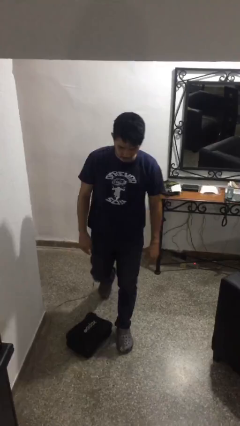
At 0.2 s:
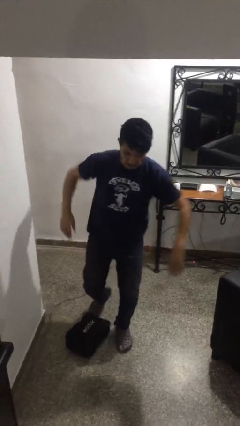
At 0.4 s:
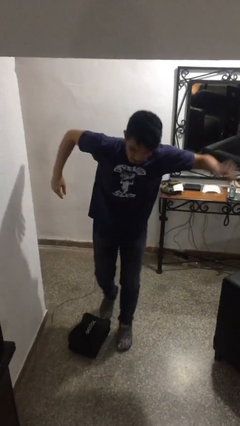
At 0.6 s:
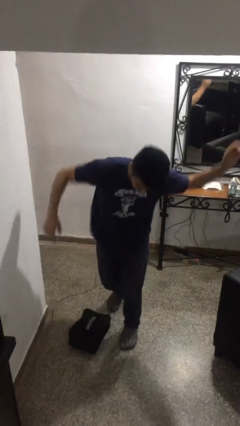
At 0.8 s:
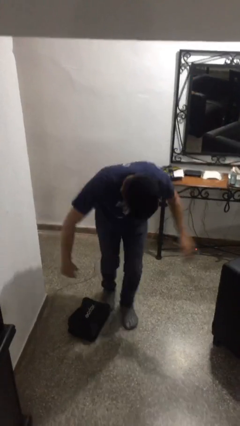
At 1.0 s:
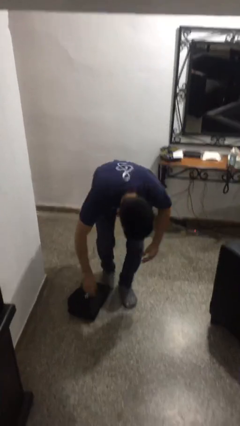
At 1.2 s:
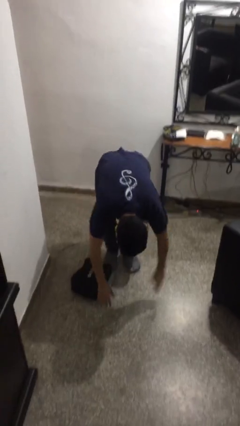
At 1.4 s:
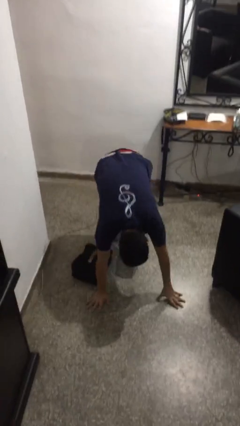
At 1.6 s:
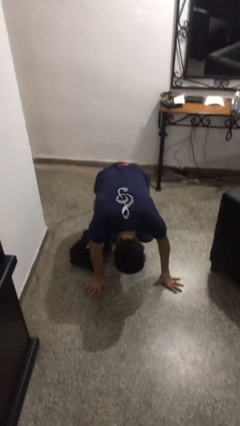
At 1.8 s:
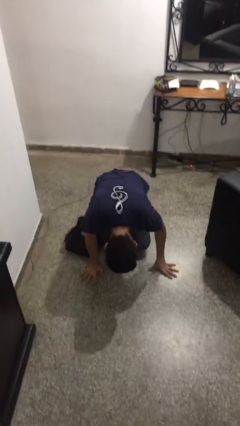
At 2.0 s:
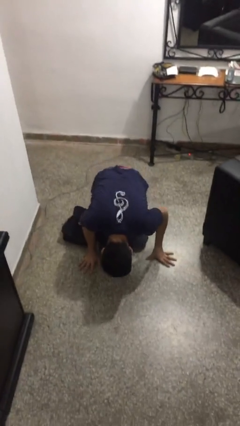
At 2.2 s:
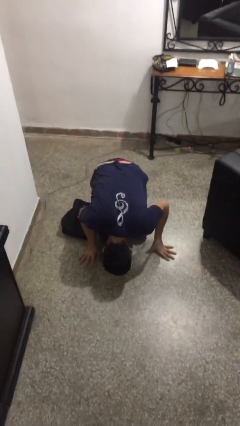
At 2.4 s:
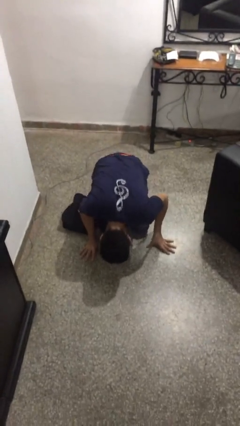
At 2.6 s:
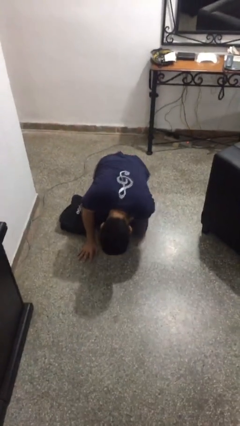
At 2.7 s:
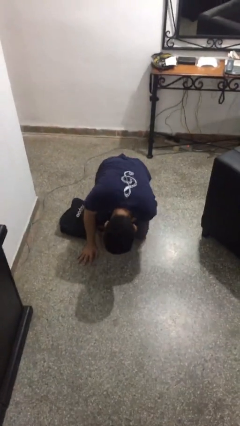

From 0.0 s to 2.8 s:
person trips on object on floor

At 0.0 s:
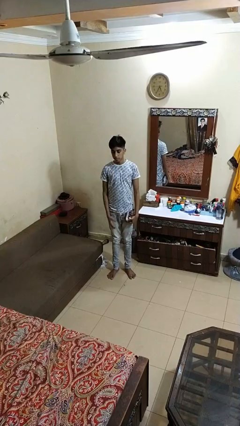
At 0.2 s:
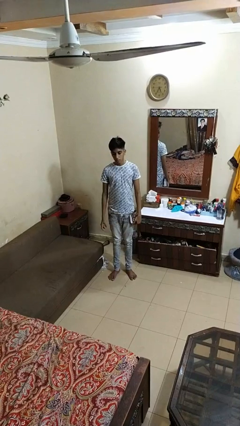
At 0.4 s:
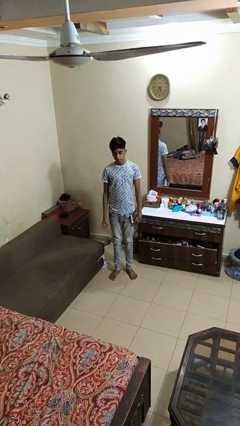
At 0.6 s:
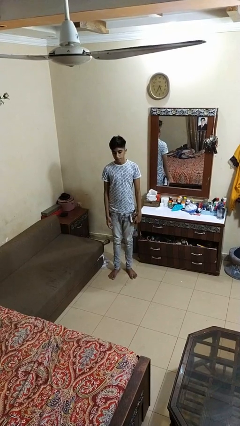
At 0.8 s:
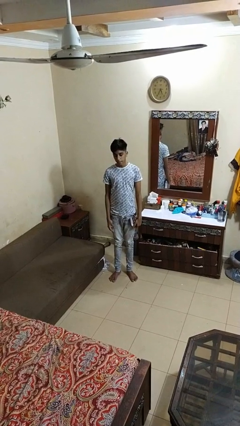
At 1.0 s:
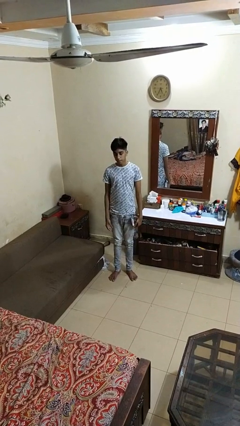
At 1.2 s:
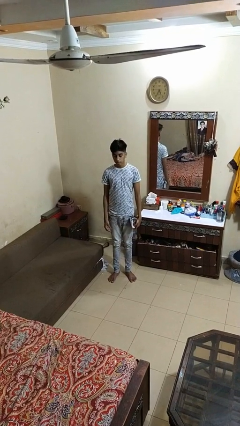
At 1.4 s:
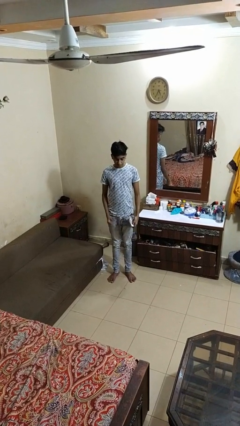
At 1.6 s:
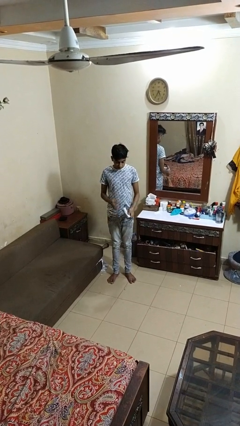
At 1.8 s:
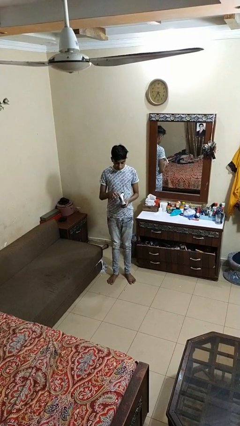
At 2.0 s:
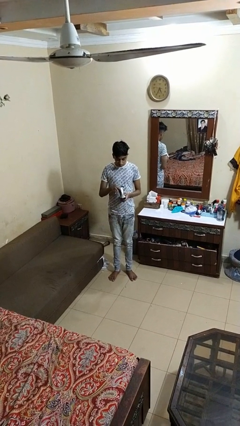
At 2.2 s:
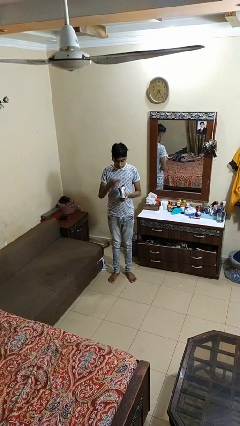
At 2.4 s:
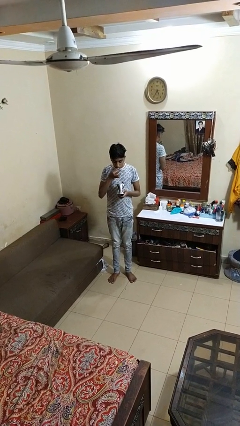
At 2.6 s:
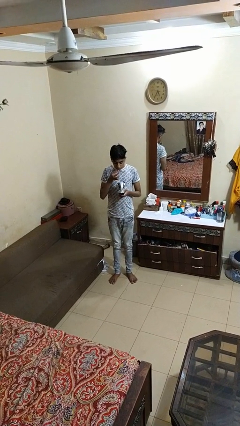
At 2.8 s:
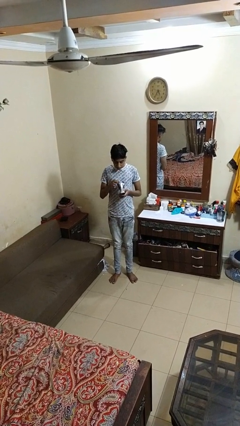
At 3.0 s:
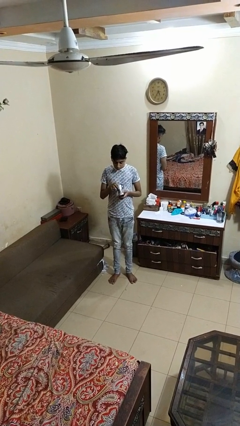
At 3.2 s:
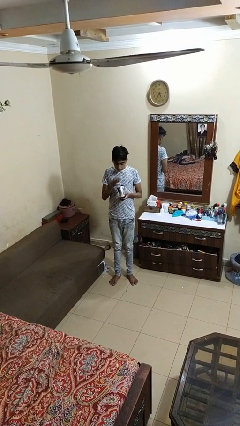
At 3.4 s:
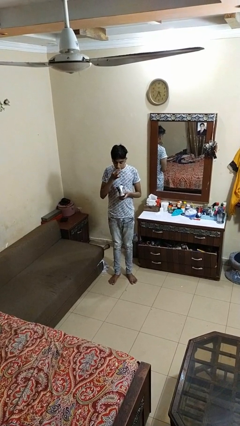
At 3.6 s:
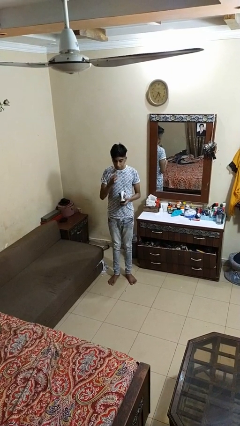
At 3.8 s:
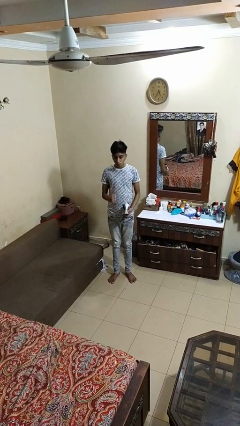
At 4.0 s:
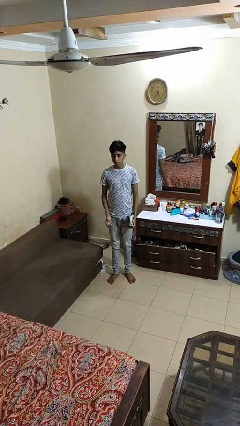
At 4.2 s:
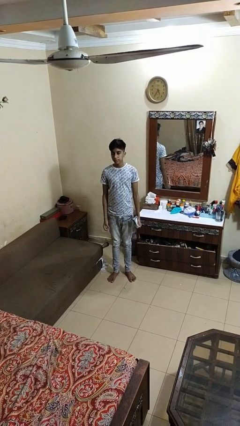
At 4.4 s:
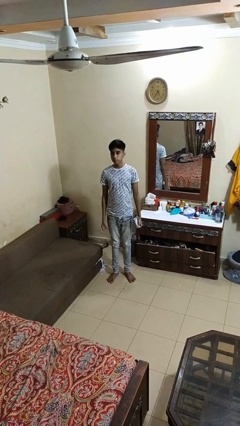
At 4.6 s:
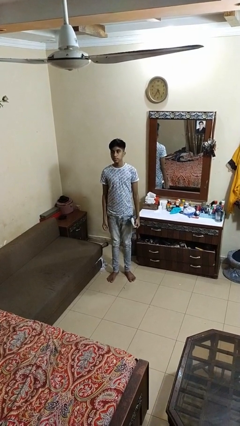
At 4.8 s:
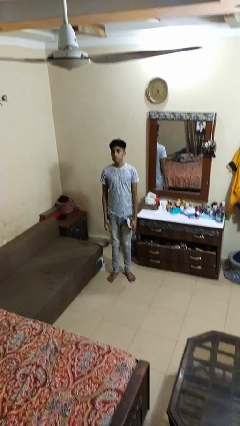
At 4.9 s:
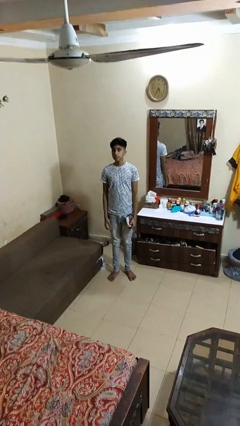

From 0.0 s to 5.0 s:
person eats snack from bag

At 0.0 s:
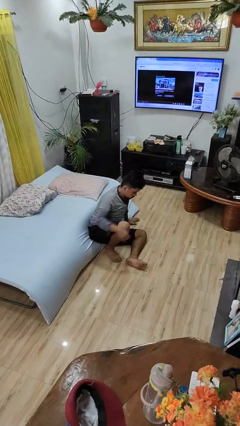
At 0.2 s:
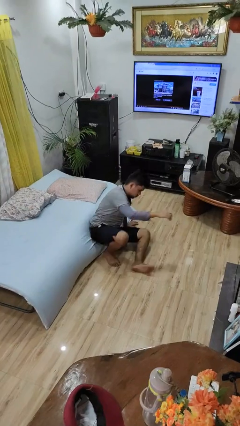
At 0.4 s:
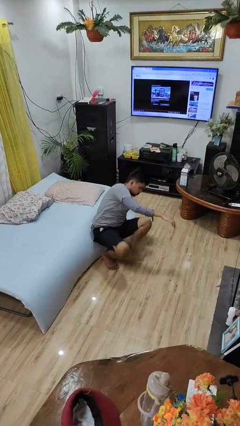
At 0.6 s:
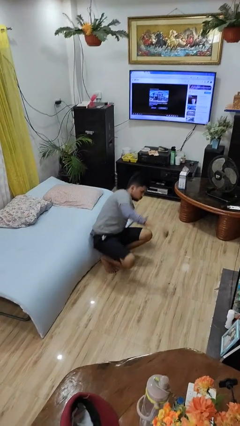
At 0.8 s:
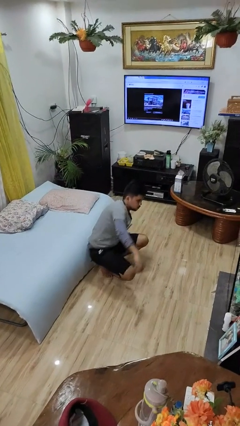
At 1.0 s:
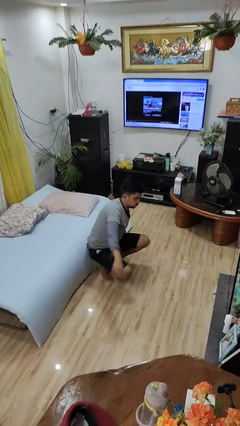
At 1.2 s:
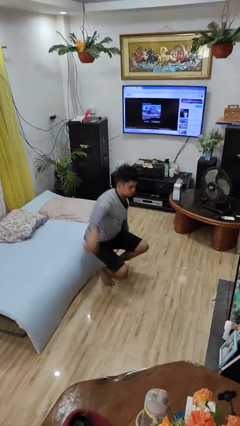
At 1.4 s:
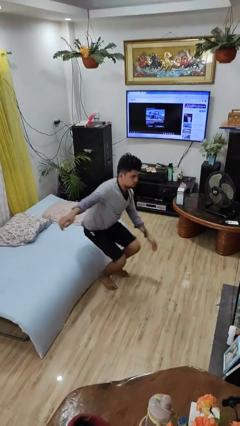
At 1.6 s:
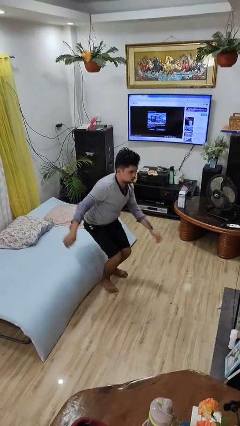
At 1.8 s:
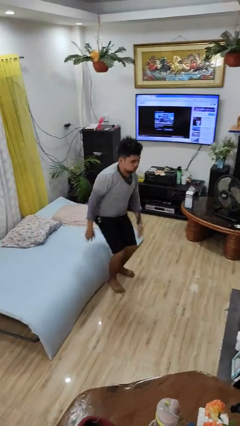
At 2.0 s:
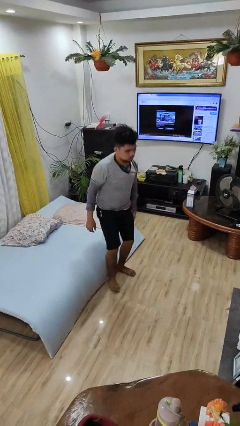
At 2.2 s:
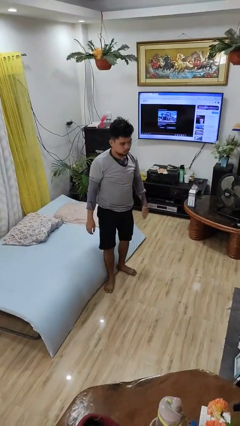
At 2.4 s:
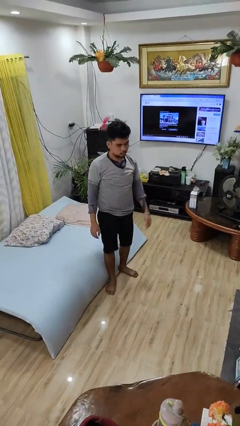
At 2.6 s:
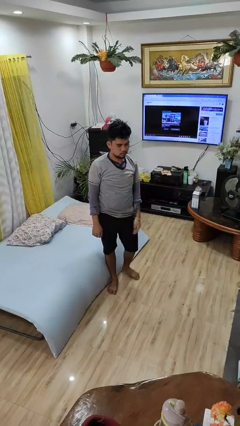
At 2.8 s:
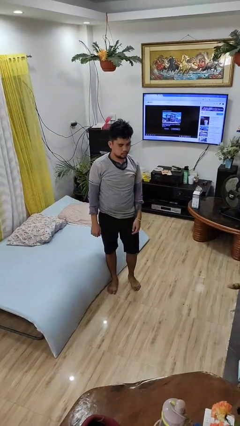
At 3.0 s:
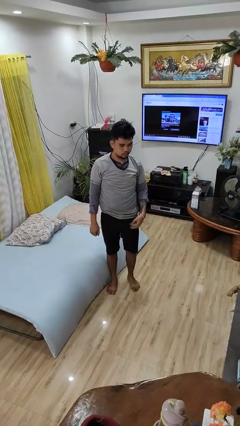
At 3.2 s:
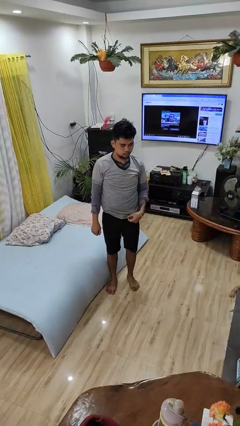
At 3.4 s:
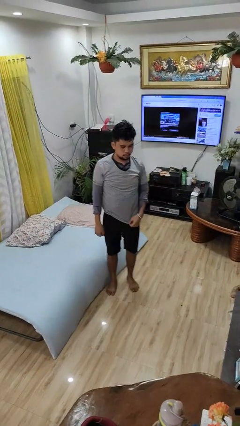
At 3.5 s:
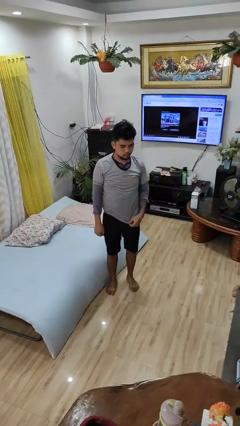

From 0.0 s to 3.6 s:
person stands up from floor

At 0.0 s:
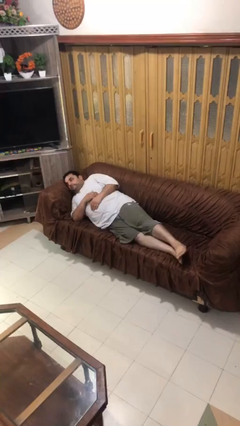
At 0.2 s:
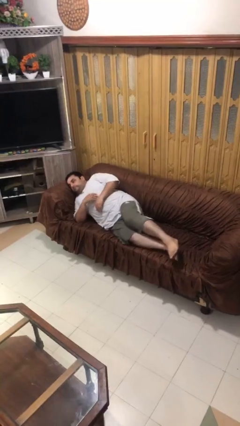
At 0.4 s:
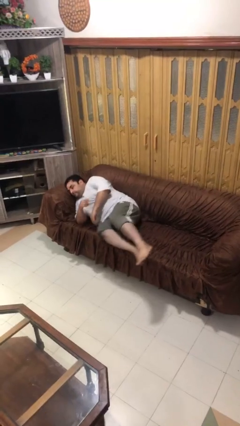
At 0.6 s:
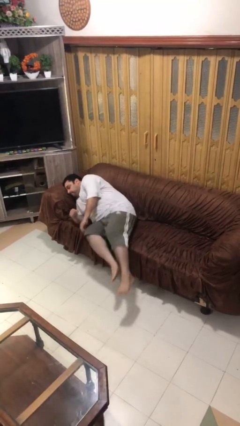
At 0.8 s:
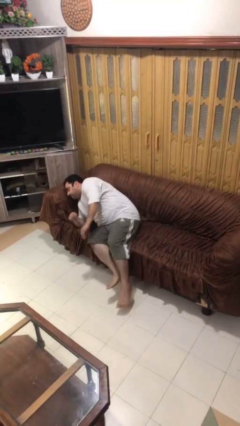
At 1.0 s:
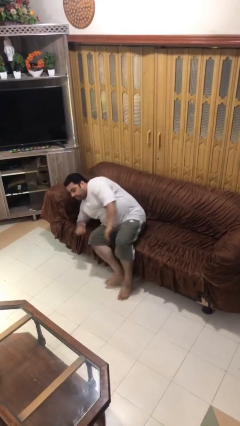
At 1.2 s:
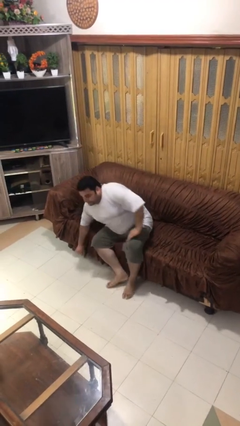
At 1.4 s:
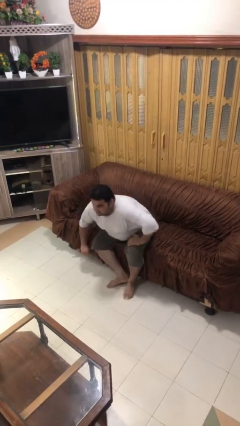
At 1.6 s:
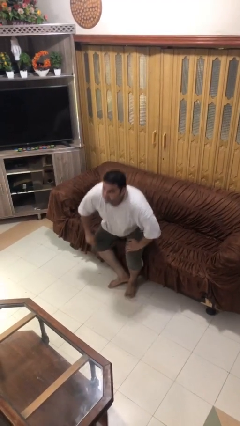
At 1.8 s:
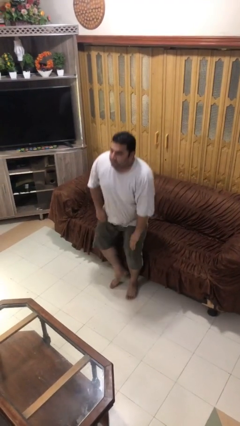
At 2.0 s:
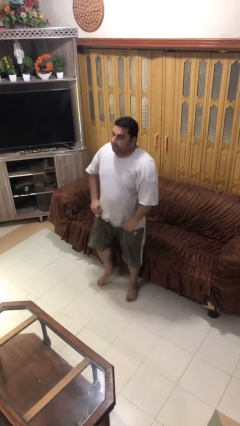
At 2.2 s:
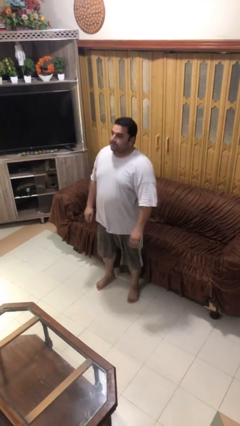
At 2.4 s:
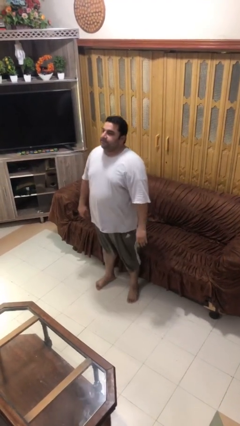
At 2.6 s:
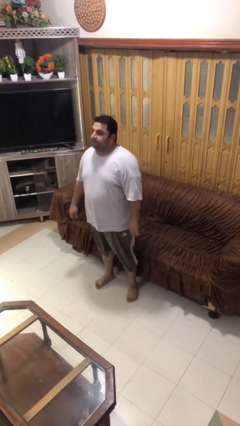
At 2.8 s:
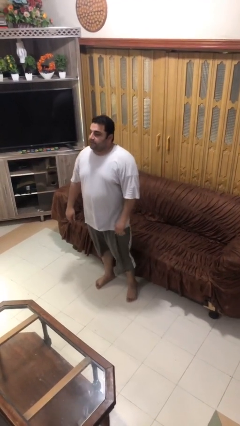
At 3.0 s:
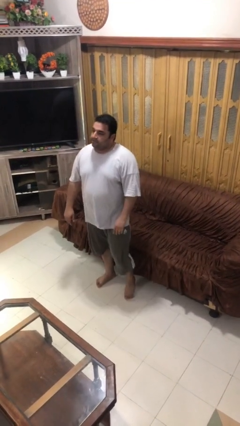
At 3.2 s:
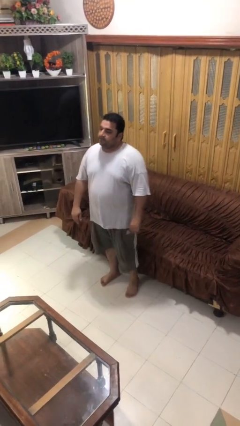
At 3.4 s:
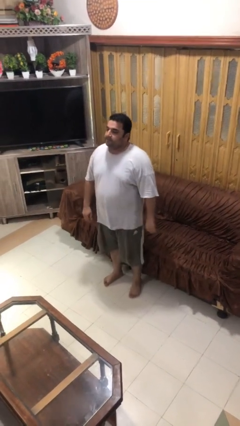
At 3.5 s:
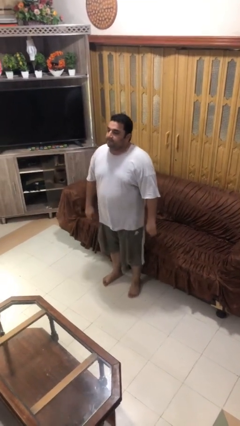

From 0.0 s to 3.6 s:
person stands up

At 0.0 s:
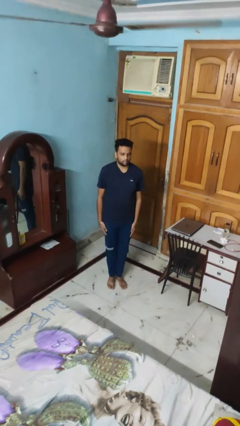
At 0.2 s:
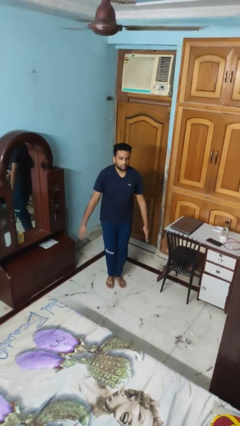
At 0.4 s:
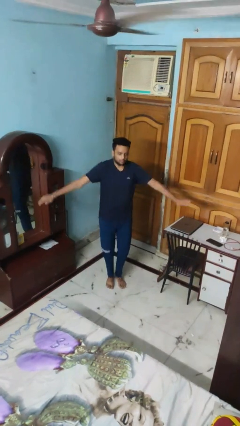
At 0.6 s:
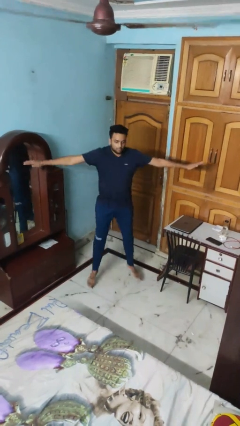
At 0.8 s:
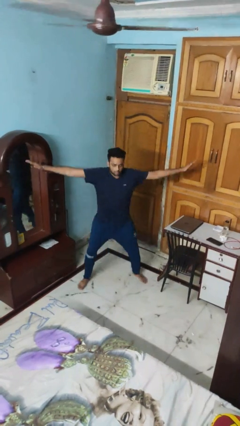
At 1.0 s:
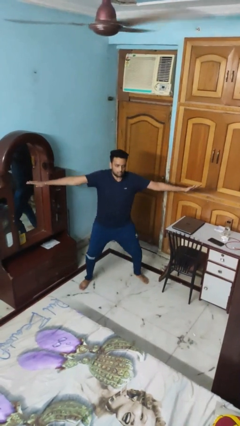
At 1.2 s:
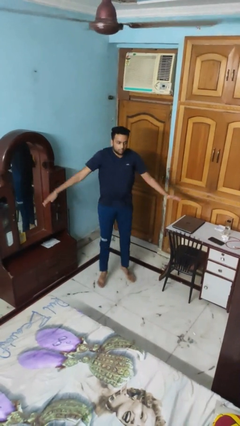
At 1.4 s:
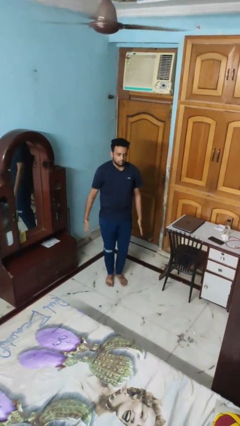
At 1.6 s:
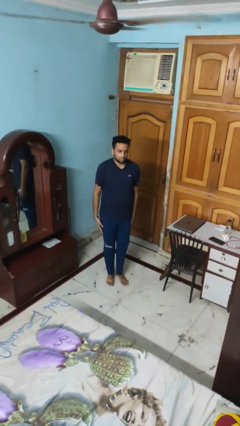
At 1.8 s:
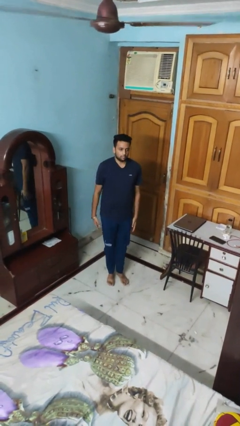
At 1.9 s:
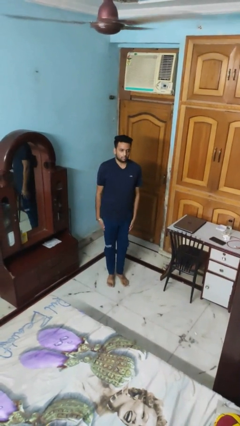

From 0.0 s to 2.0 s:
person exercises with jumping jacks

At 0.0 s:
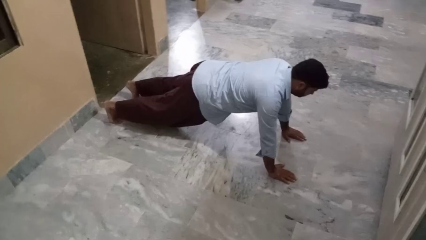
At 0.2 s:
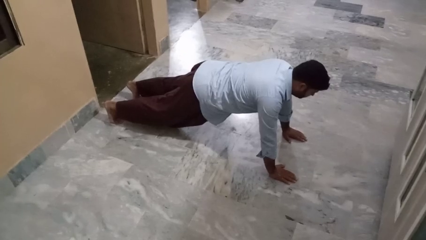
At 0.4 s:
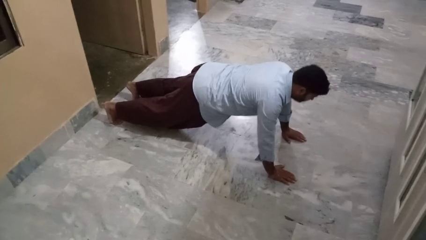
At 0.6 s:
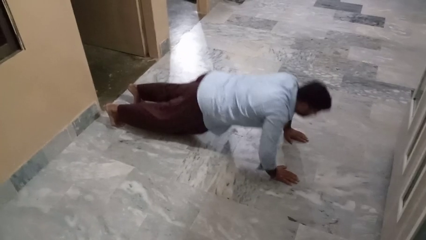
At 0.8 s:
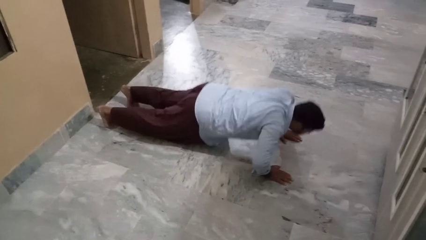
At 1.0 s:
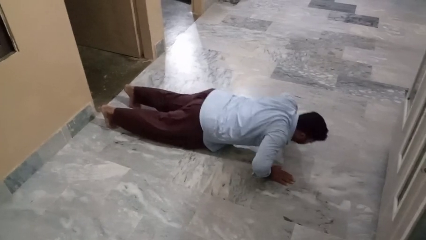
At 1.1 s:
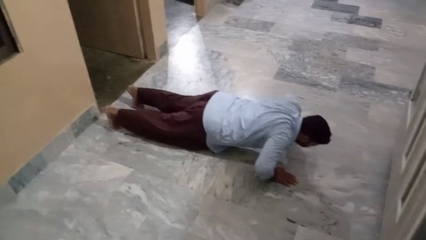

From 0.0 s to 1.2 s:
person exercises with pushup
